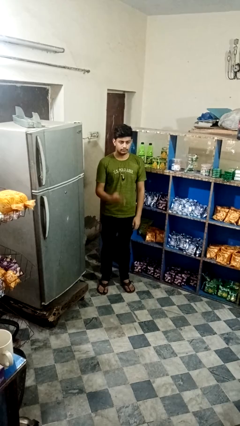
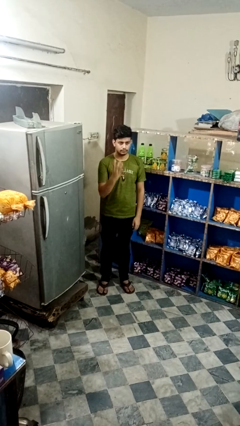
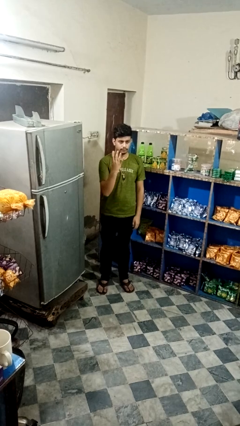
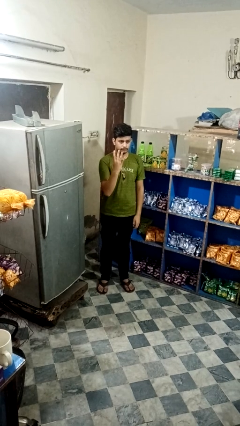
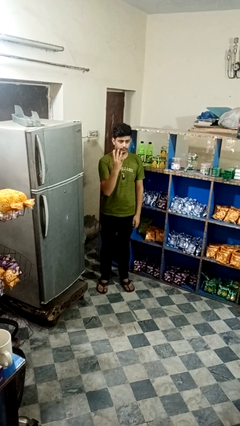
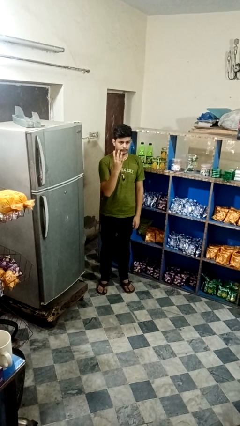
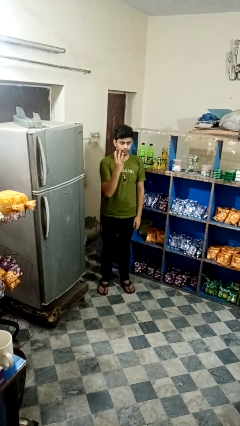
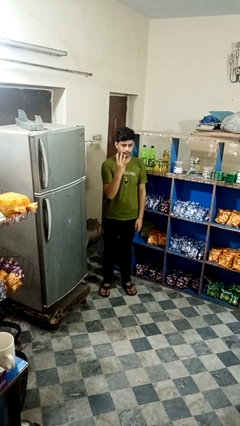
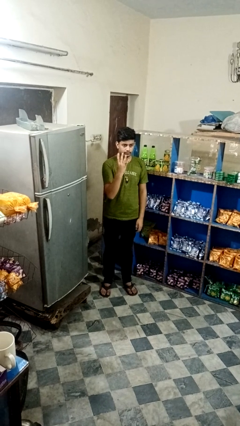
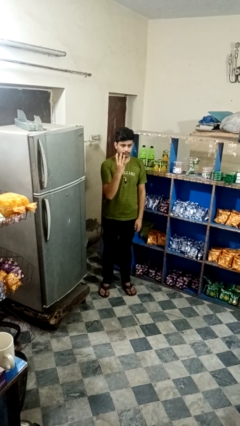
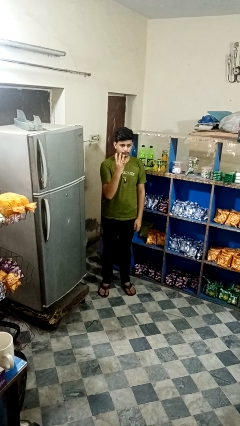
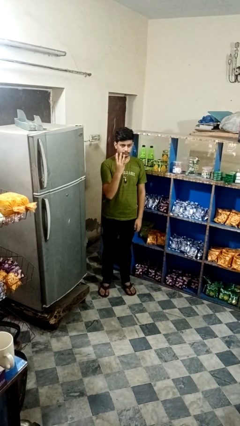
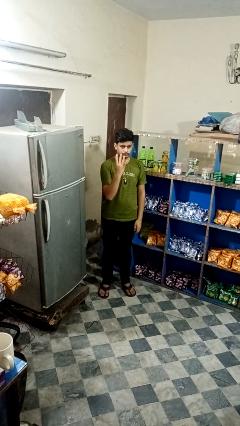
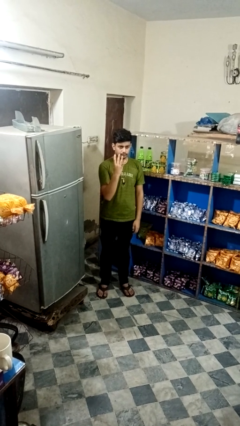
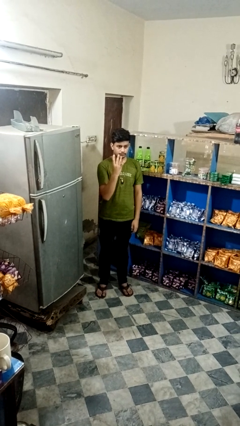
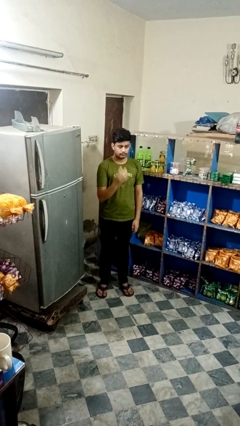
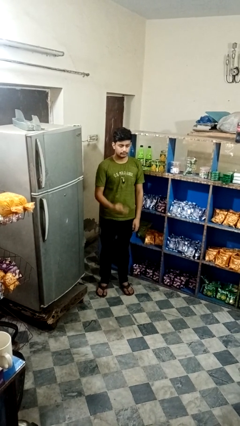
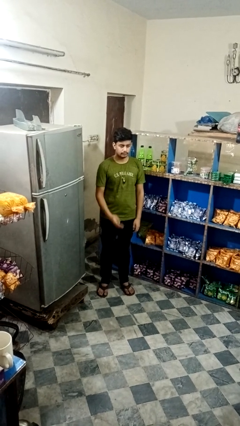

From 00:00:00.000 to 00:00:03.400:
person gestures number four

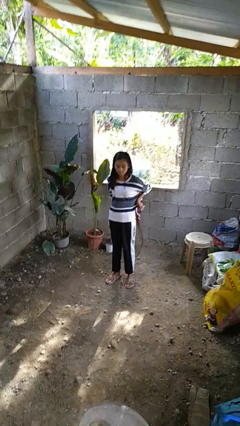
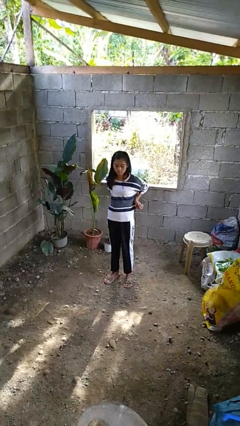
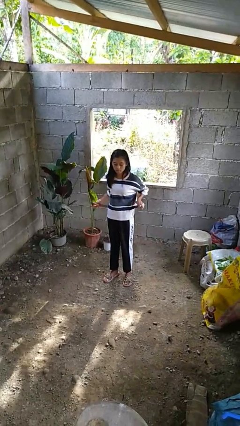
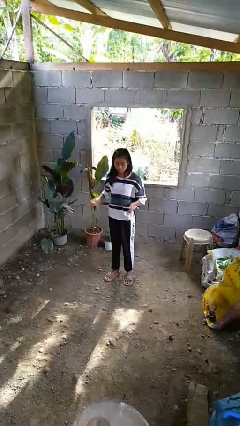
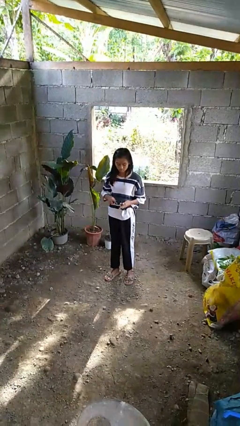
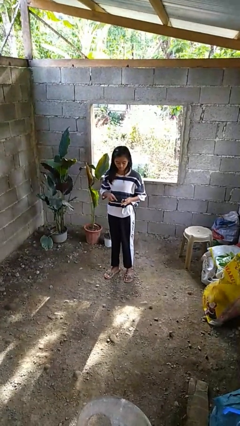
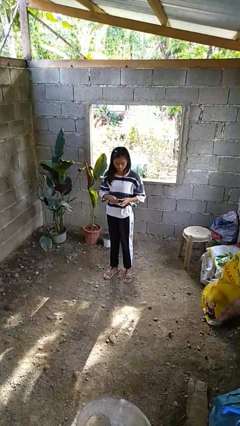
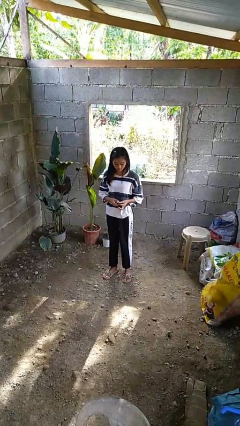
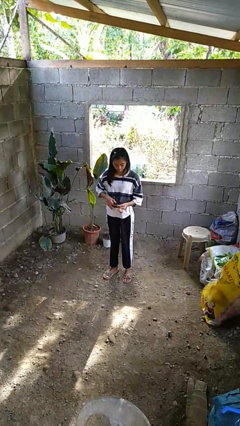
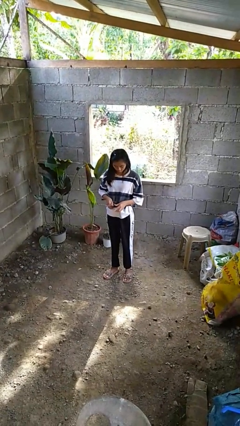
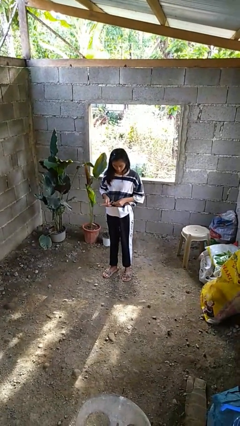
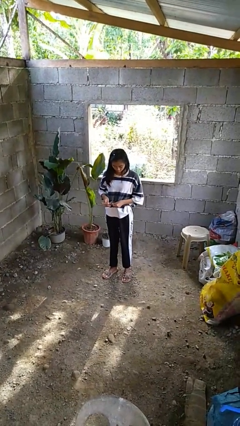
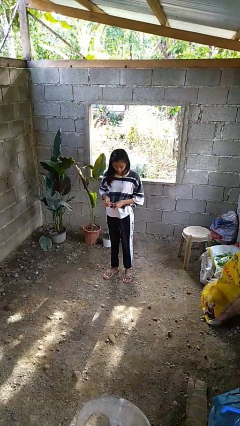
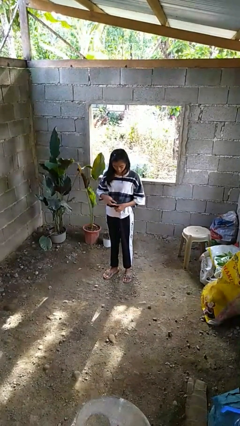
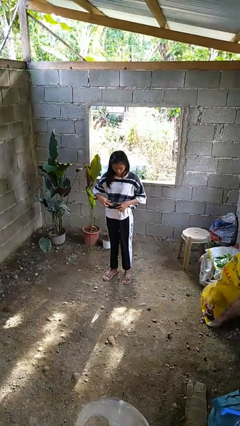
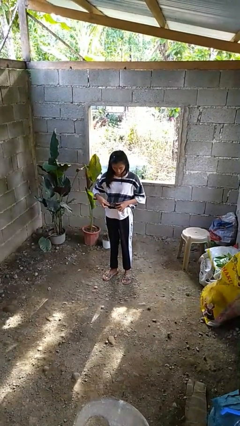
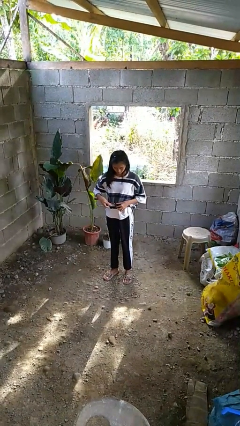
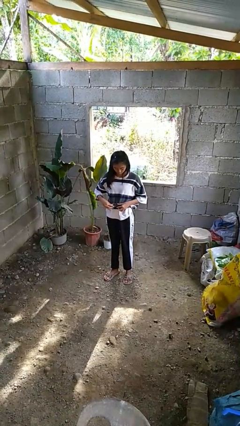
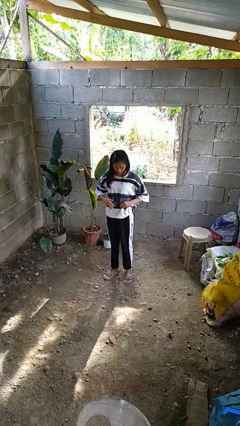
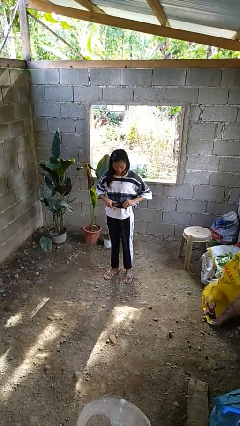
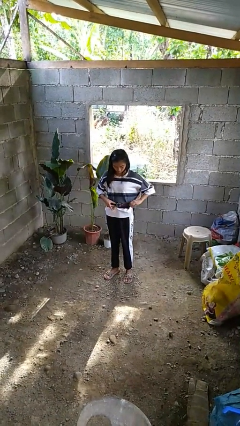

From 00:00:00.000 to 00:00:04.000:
person puts on belt

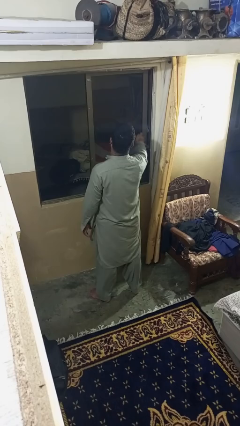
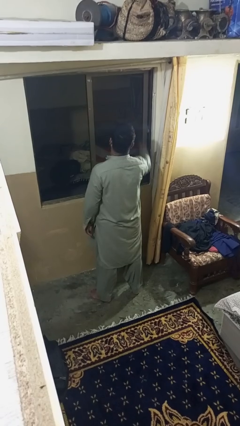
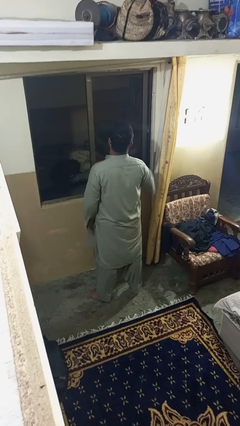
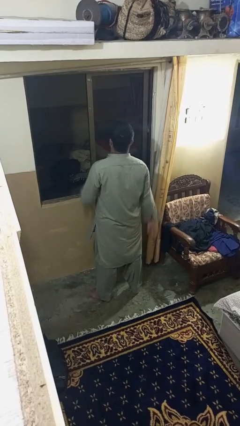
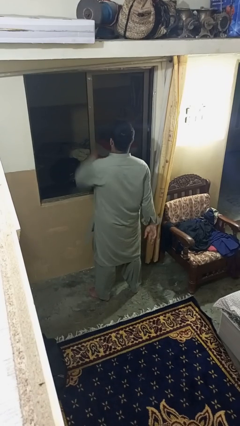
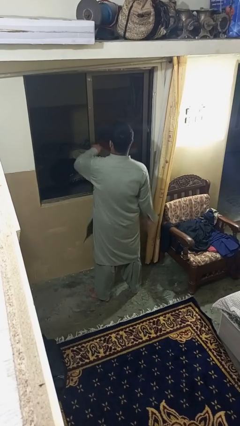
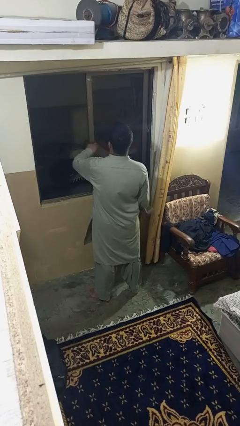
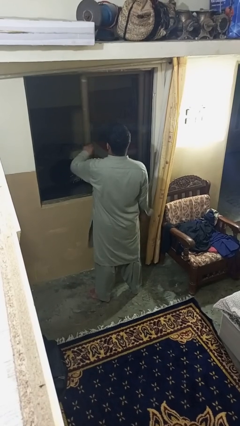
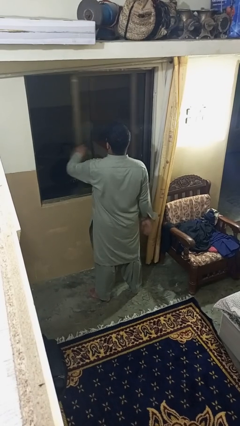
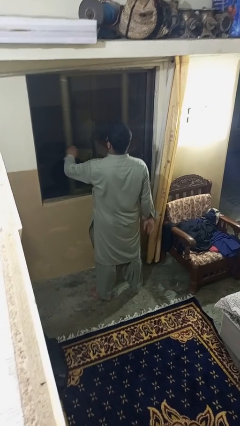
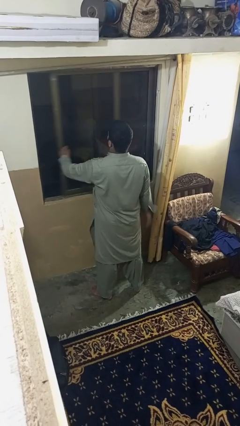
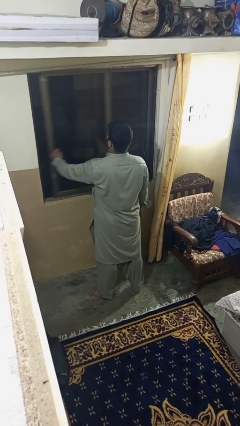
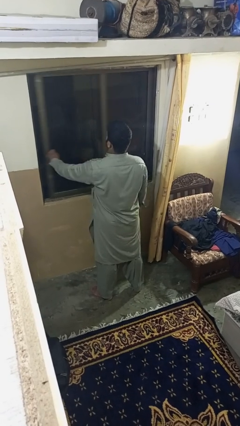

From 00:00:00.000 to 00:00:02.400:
person closes home window

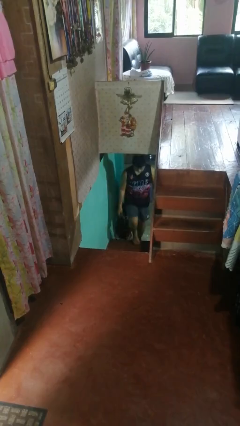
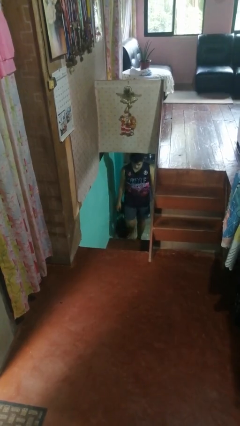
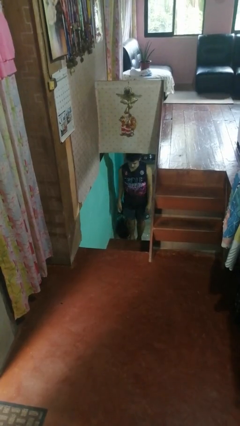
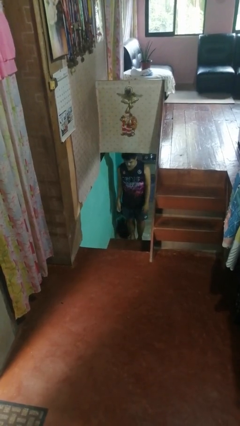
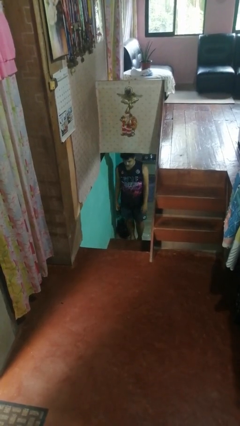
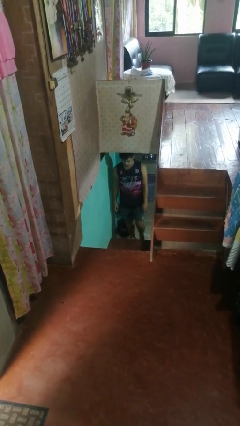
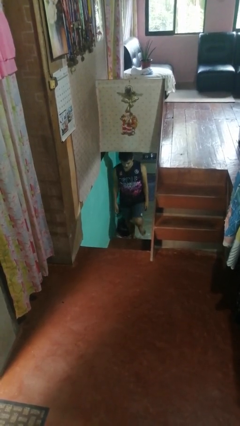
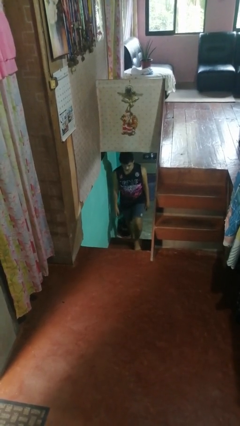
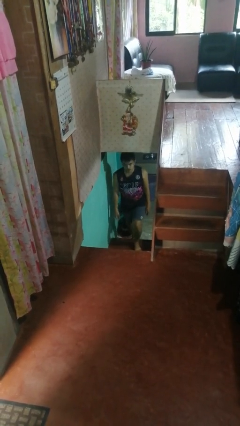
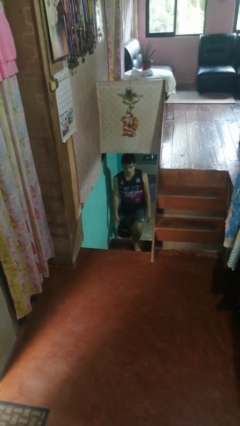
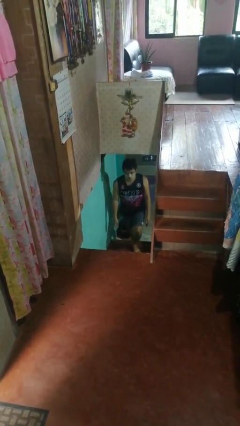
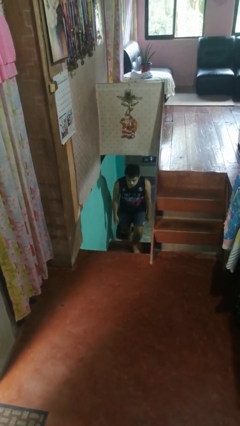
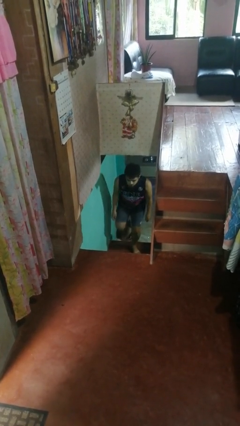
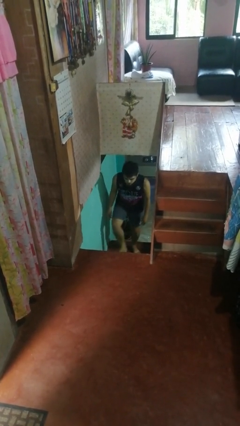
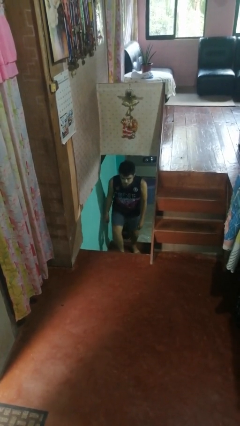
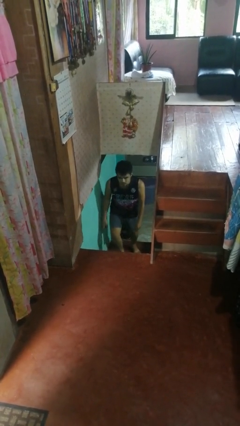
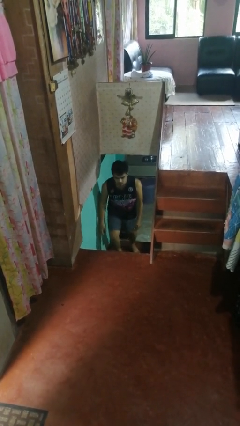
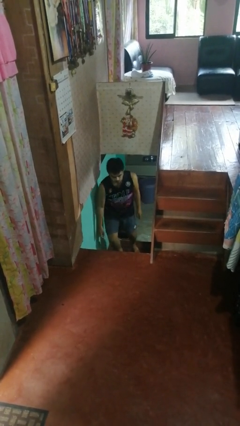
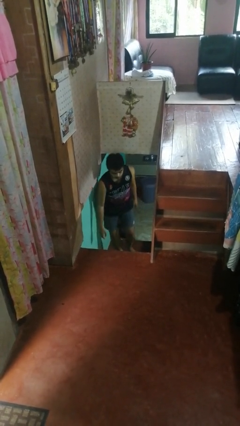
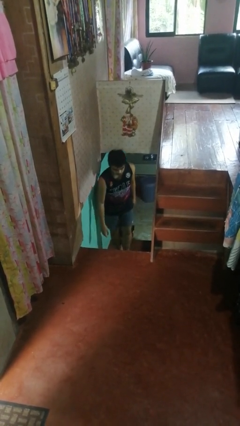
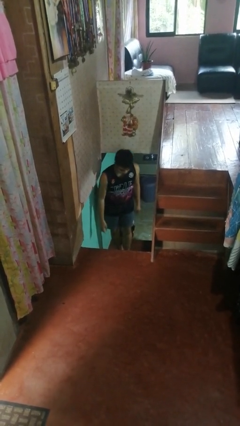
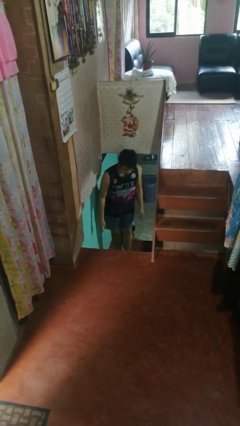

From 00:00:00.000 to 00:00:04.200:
person climbs up stairs

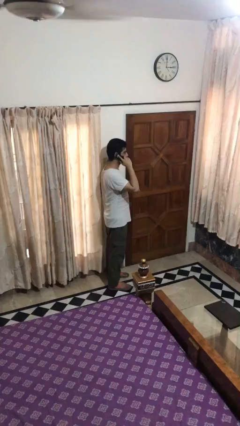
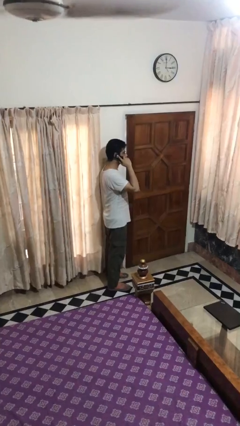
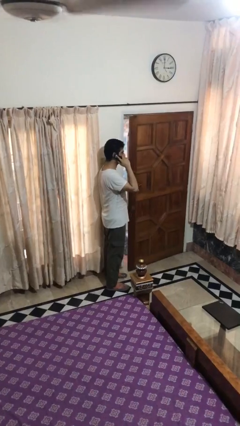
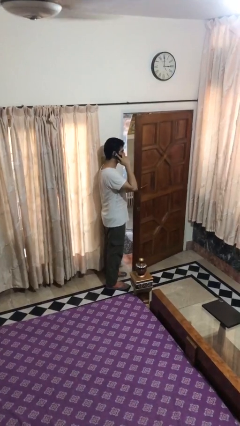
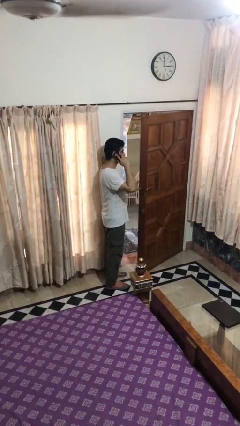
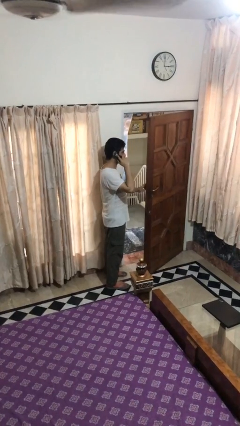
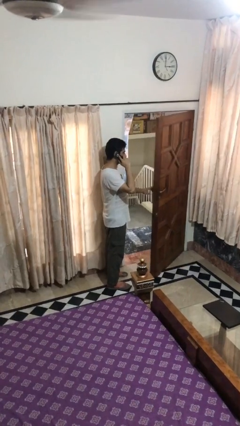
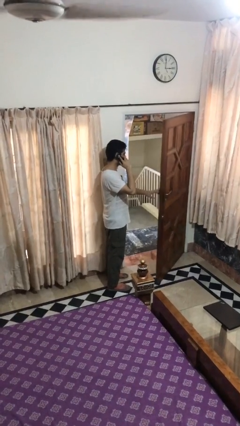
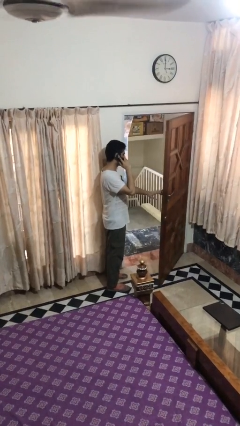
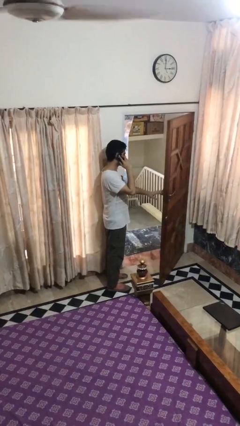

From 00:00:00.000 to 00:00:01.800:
person opens facility door

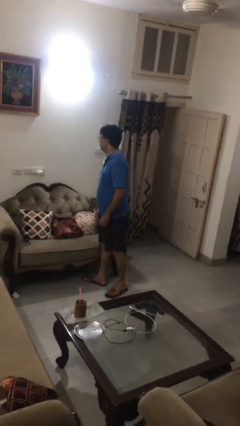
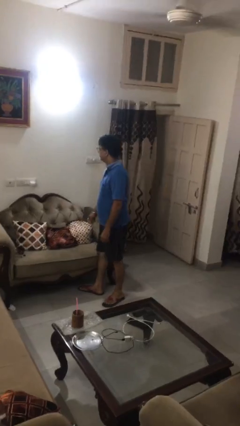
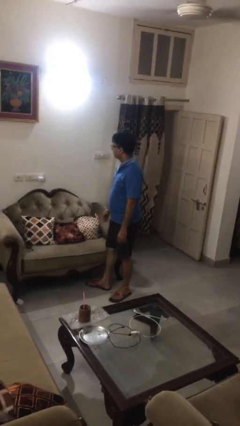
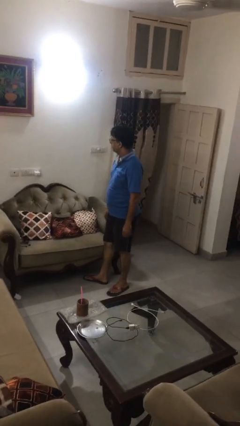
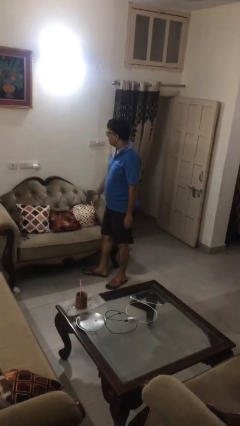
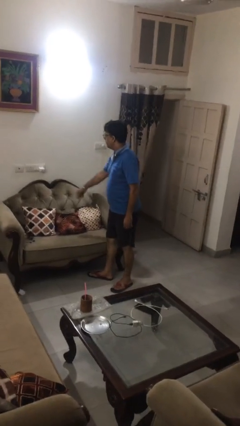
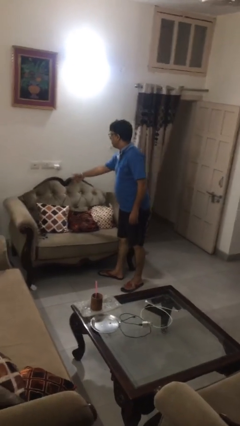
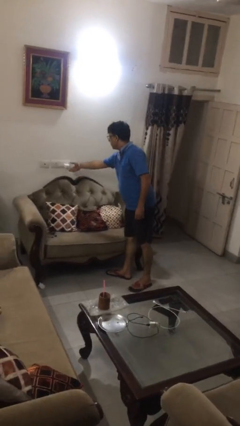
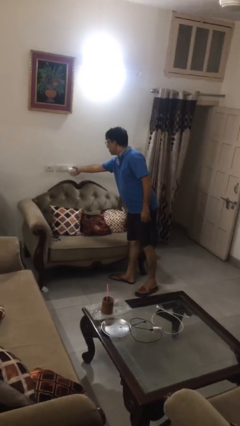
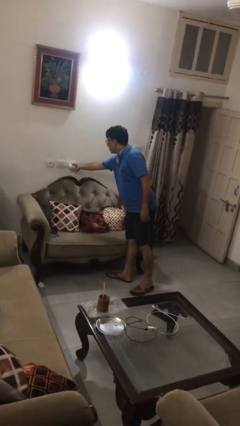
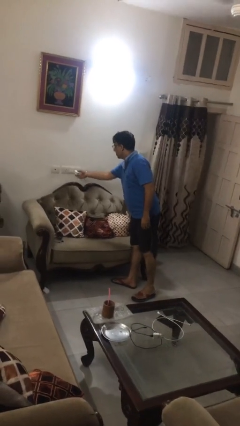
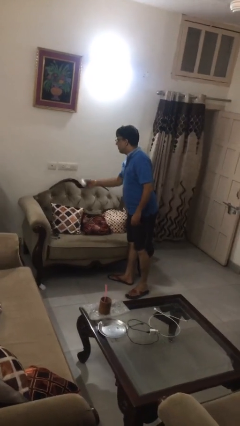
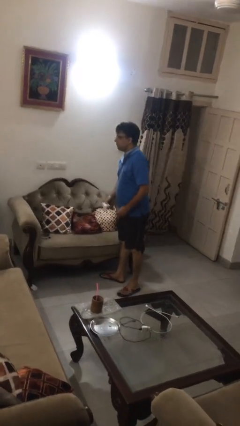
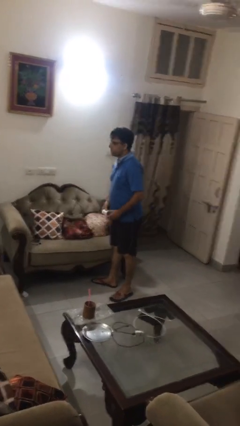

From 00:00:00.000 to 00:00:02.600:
person unplugs from electrical socket
